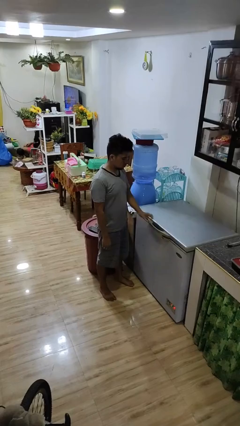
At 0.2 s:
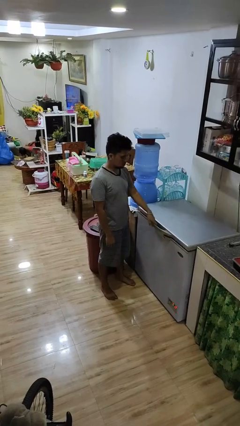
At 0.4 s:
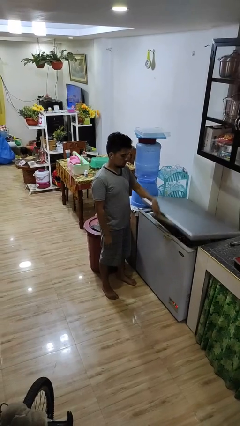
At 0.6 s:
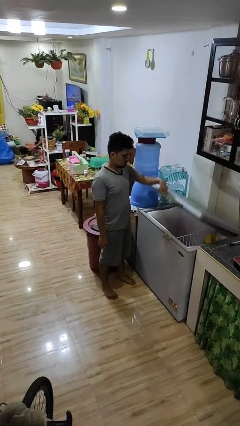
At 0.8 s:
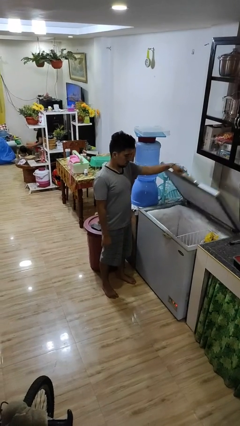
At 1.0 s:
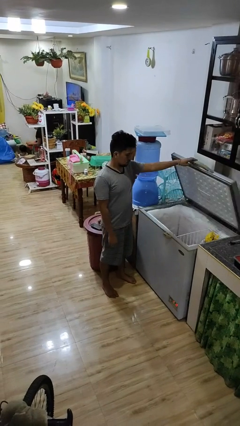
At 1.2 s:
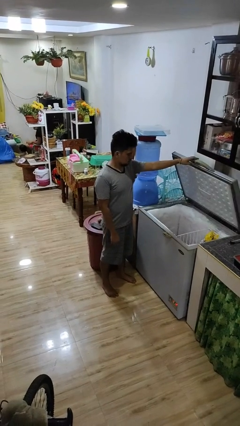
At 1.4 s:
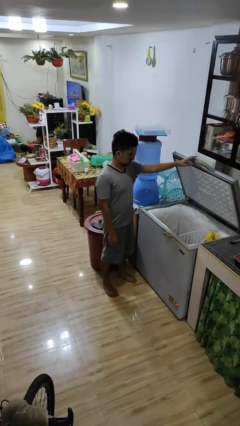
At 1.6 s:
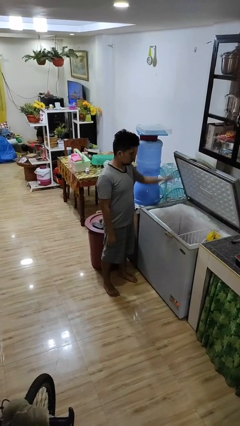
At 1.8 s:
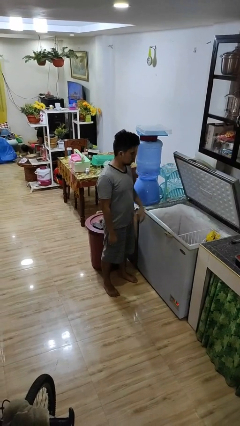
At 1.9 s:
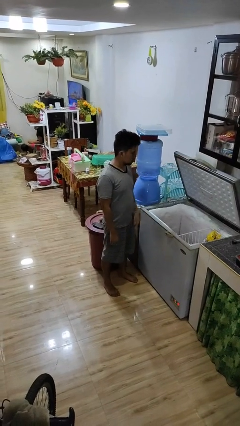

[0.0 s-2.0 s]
person opens refrigerator

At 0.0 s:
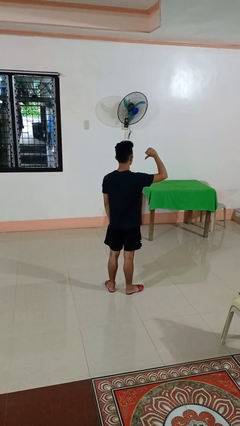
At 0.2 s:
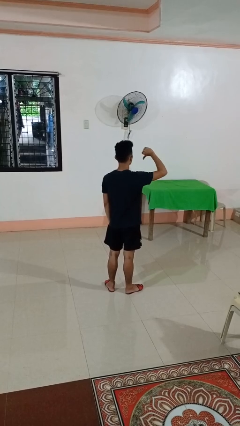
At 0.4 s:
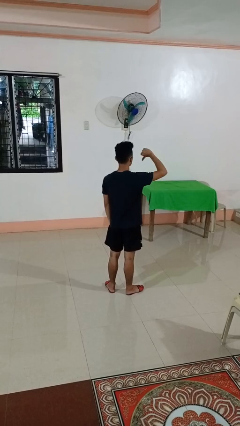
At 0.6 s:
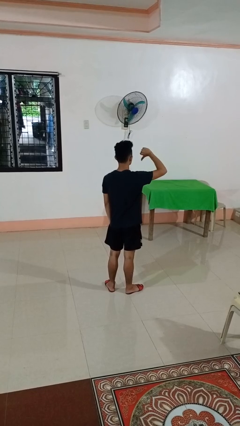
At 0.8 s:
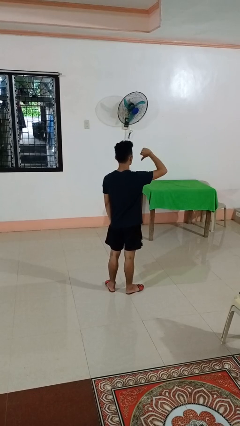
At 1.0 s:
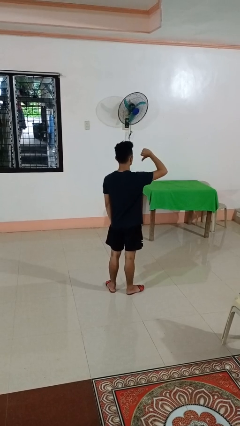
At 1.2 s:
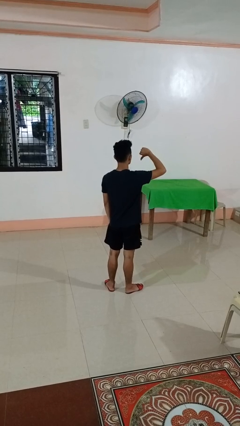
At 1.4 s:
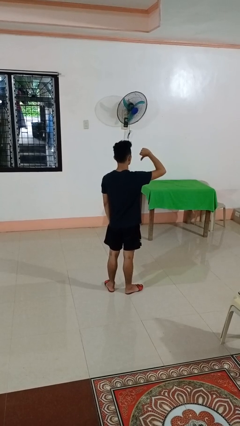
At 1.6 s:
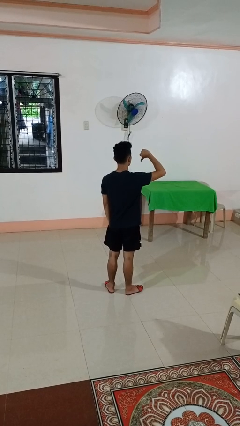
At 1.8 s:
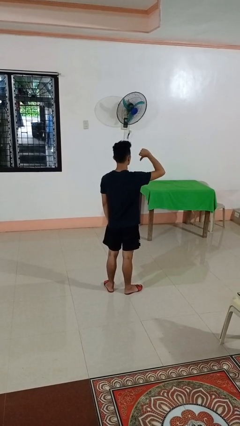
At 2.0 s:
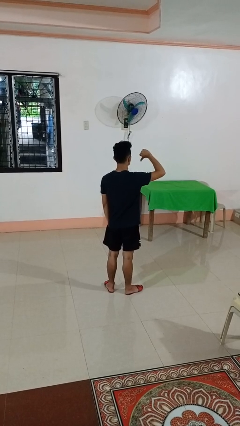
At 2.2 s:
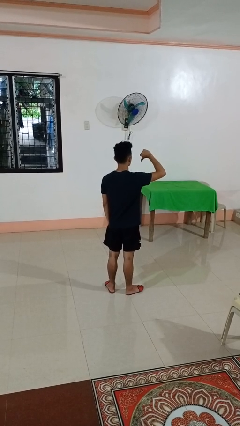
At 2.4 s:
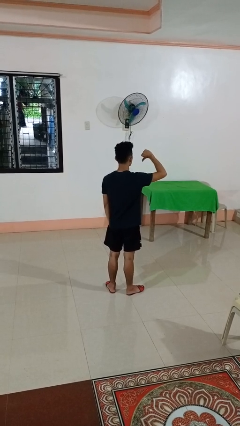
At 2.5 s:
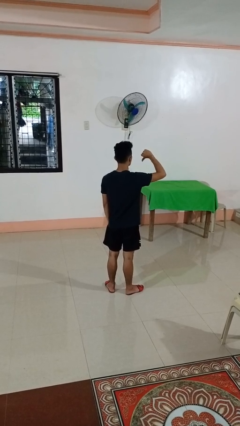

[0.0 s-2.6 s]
person gestures thumbs down

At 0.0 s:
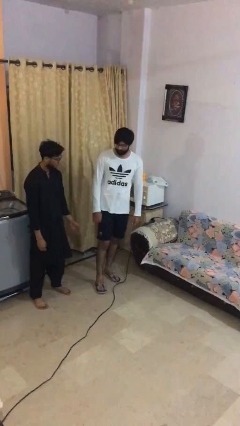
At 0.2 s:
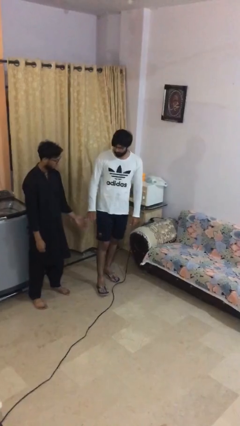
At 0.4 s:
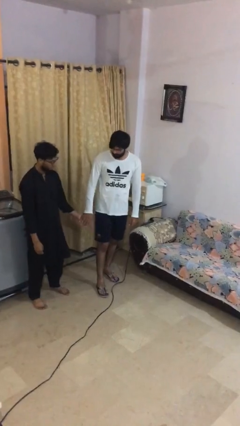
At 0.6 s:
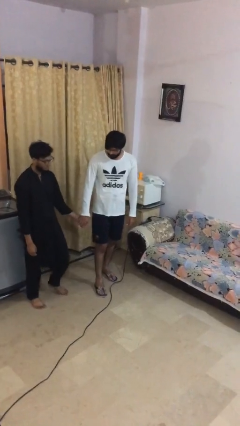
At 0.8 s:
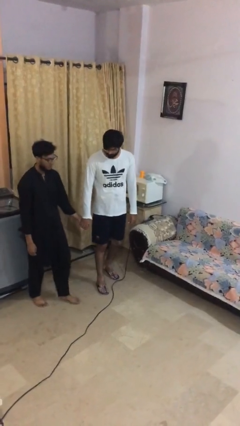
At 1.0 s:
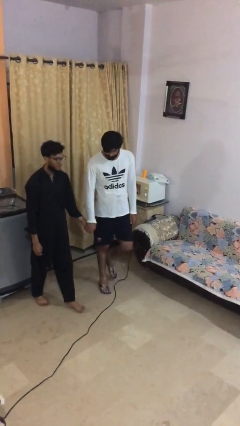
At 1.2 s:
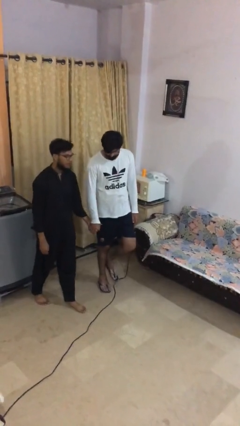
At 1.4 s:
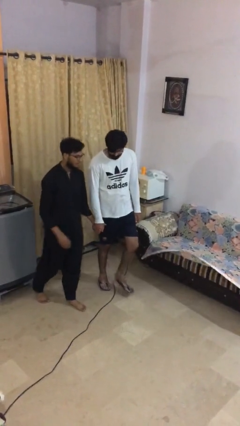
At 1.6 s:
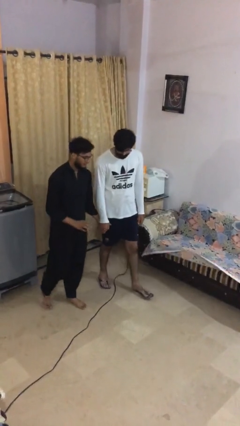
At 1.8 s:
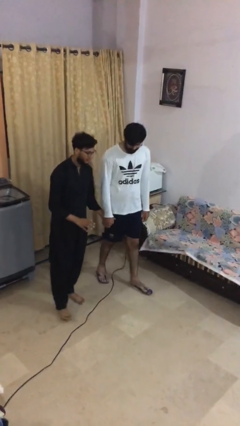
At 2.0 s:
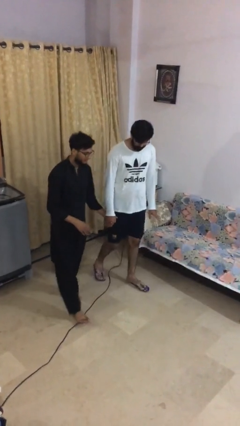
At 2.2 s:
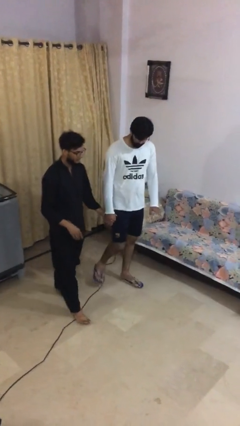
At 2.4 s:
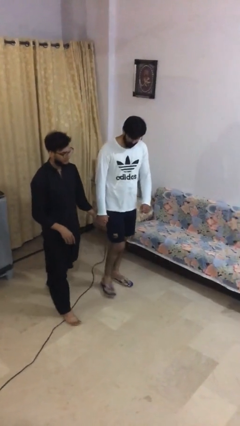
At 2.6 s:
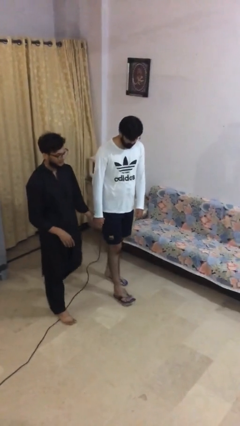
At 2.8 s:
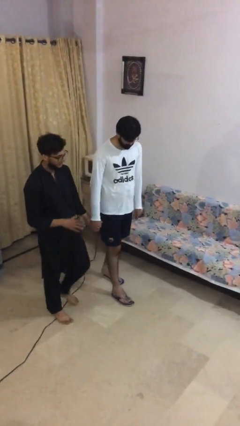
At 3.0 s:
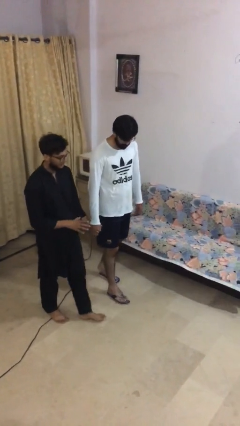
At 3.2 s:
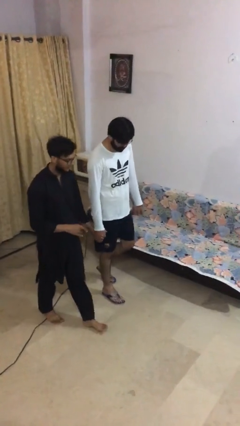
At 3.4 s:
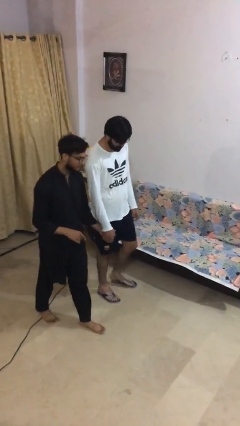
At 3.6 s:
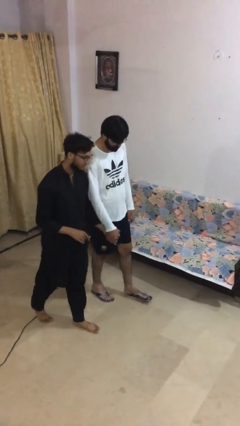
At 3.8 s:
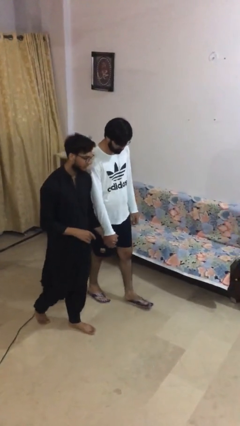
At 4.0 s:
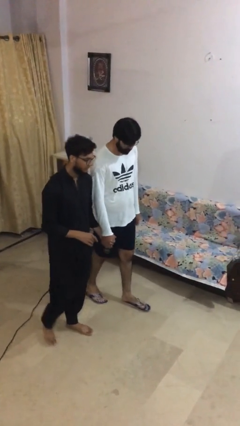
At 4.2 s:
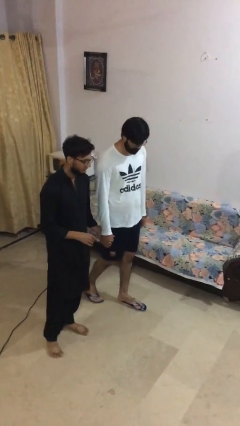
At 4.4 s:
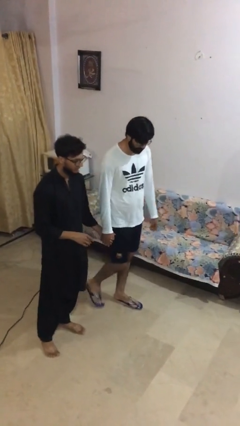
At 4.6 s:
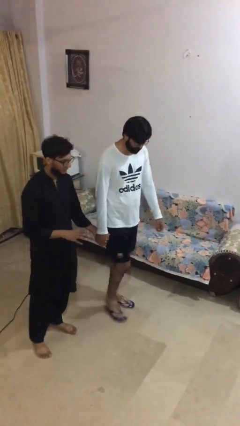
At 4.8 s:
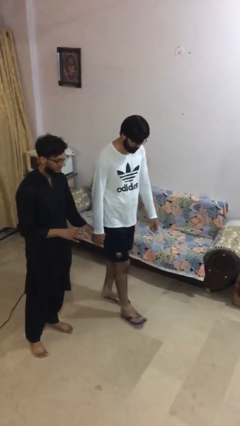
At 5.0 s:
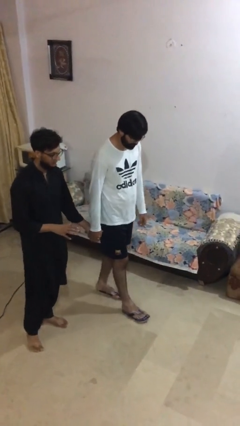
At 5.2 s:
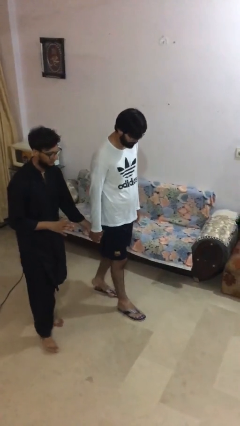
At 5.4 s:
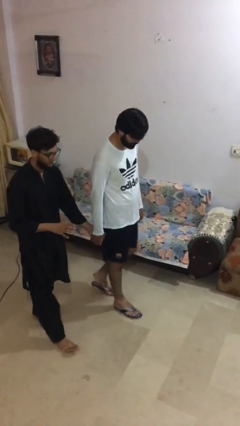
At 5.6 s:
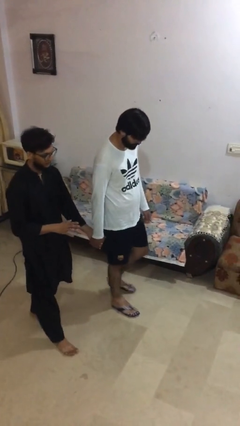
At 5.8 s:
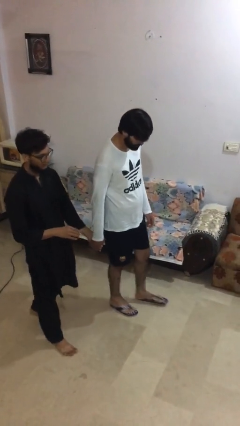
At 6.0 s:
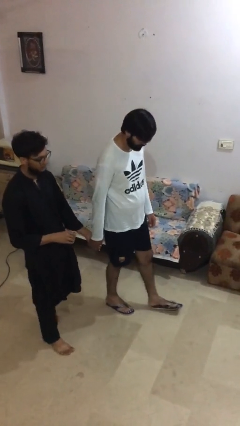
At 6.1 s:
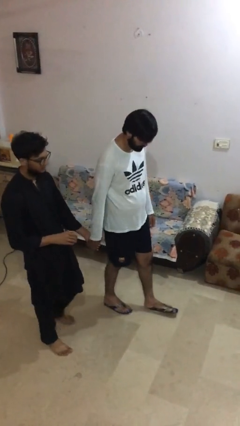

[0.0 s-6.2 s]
person holds hand

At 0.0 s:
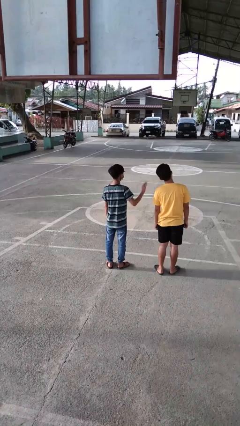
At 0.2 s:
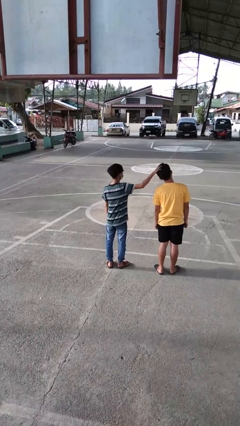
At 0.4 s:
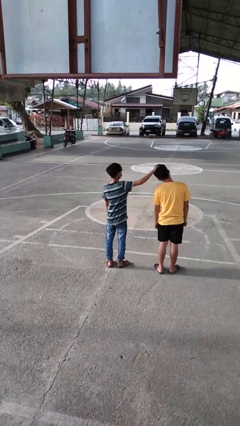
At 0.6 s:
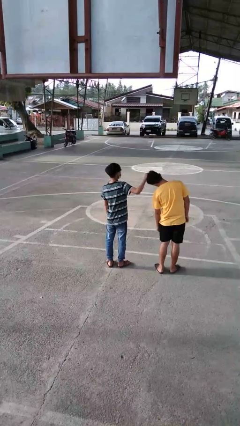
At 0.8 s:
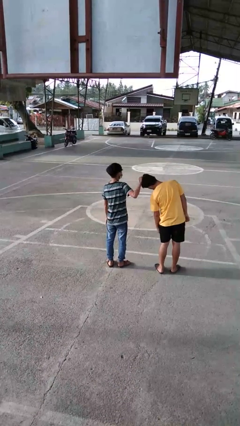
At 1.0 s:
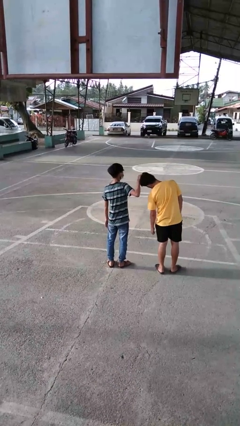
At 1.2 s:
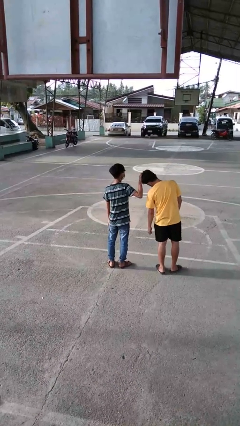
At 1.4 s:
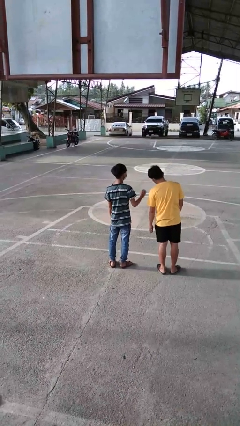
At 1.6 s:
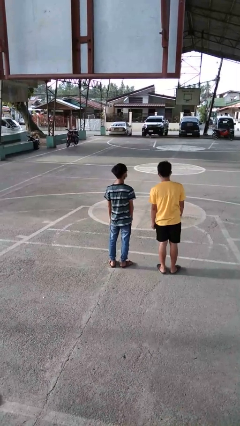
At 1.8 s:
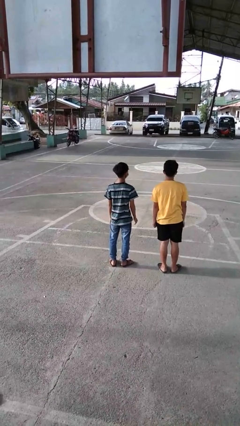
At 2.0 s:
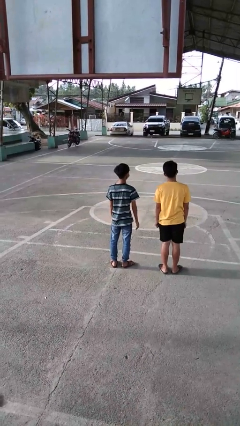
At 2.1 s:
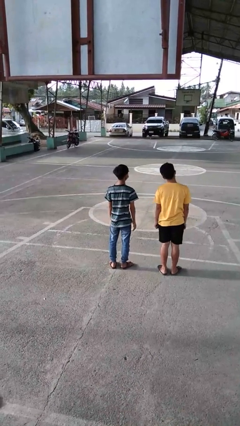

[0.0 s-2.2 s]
person grabs person by hair

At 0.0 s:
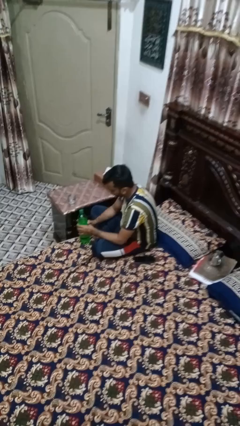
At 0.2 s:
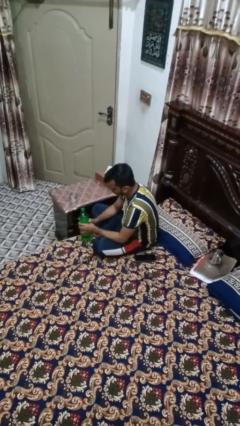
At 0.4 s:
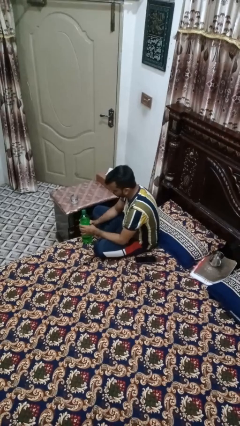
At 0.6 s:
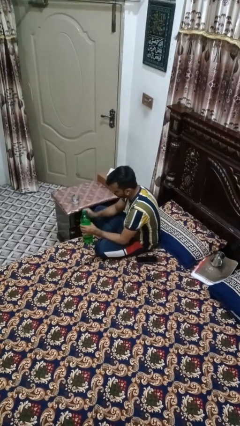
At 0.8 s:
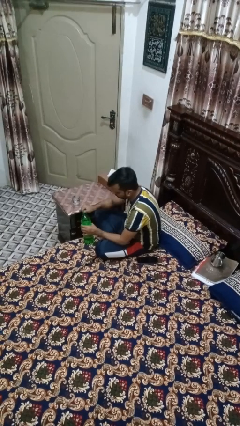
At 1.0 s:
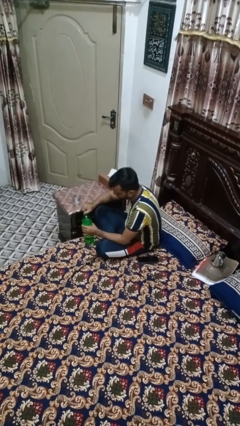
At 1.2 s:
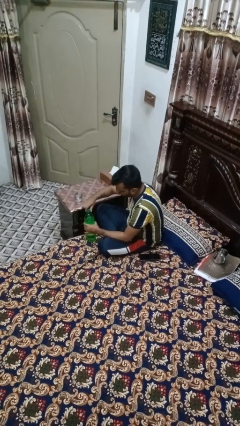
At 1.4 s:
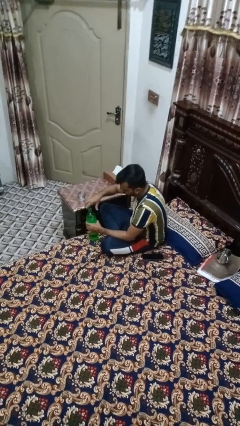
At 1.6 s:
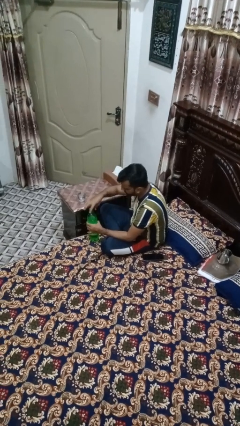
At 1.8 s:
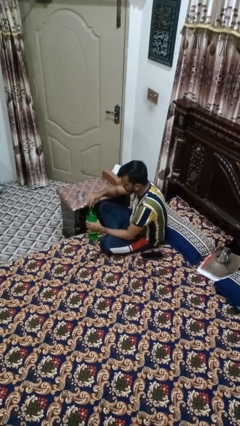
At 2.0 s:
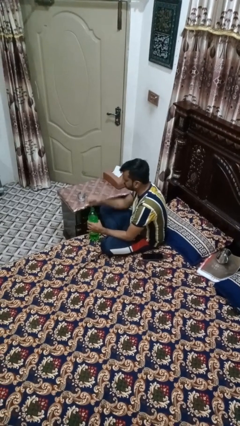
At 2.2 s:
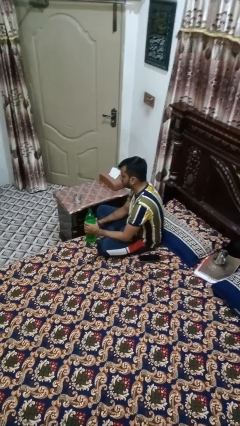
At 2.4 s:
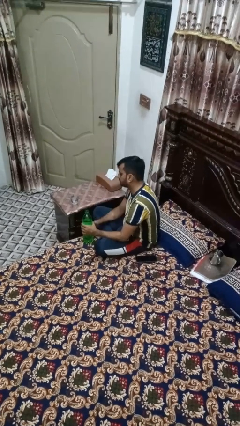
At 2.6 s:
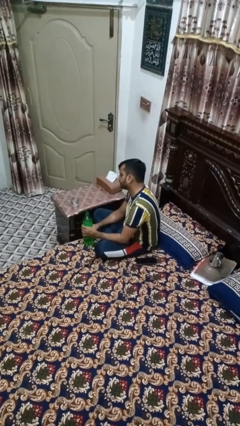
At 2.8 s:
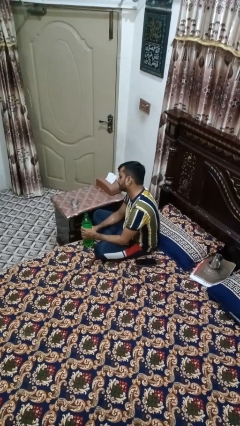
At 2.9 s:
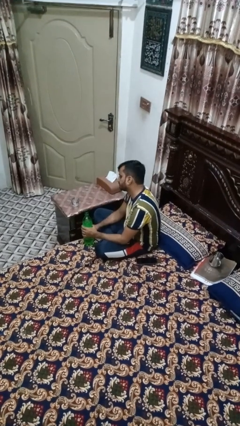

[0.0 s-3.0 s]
person unscrews lid from bottle

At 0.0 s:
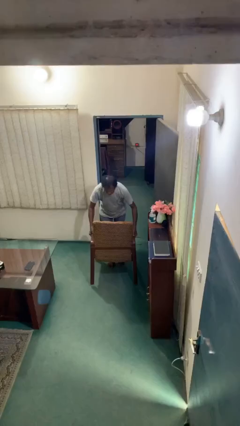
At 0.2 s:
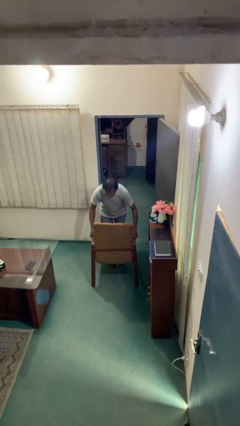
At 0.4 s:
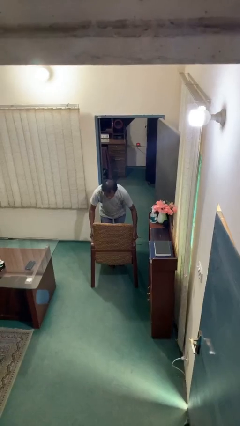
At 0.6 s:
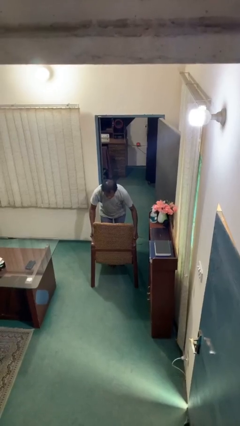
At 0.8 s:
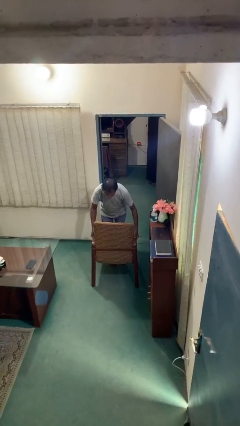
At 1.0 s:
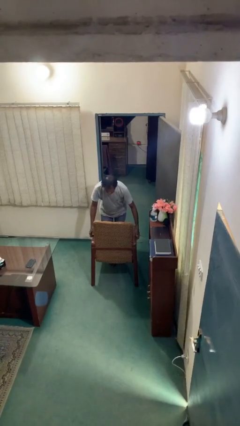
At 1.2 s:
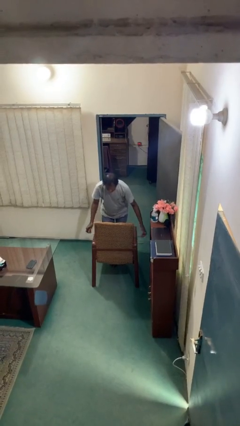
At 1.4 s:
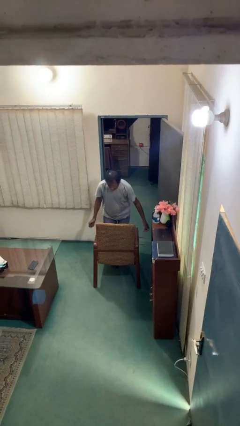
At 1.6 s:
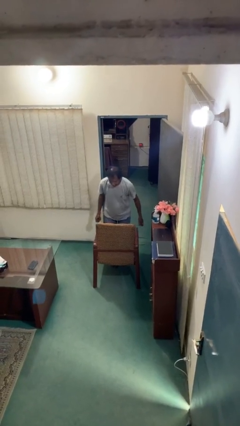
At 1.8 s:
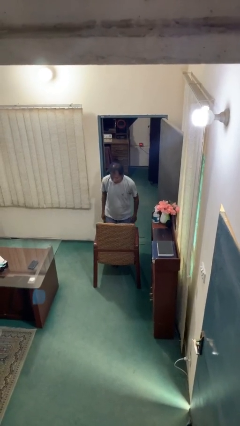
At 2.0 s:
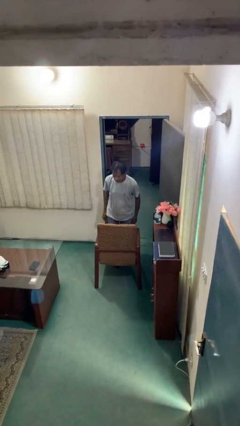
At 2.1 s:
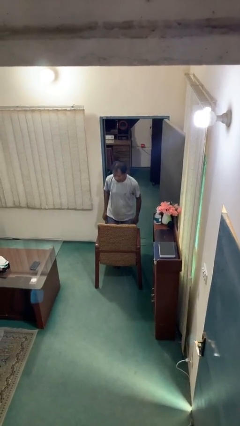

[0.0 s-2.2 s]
person puts down object on floor
